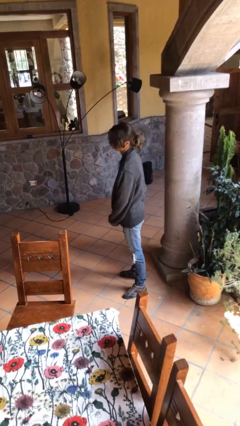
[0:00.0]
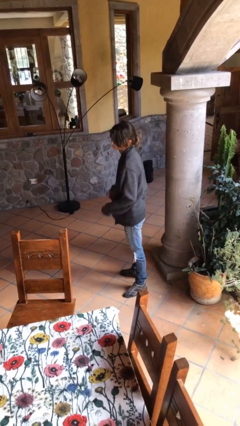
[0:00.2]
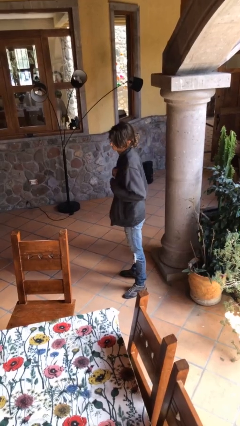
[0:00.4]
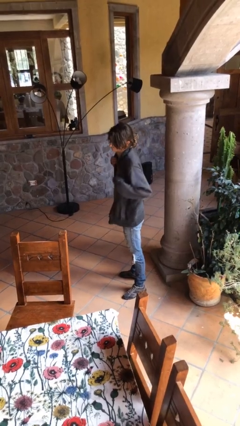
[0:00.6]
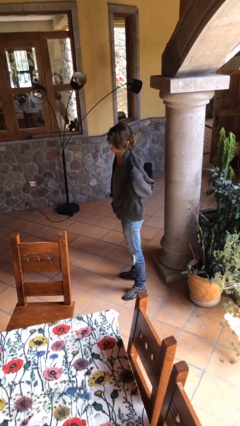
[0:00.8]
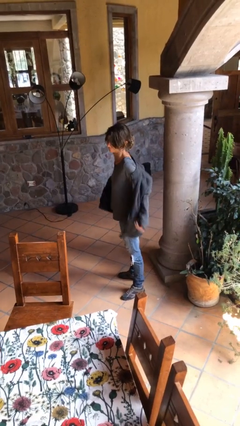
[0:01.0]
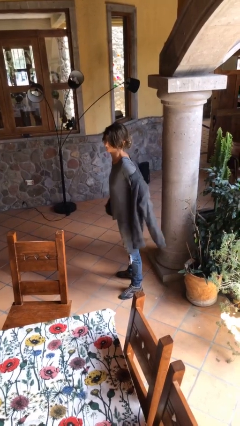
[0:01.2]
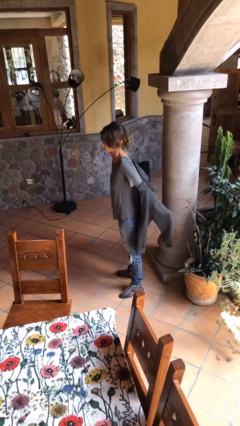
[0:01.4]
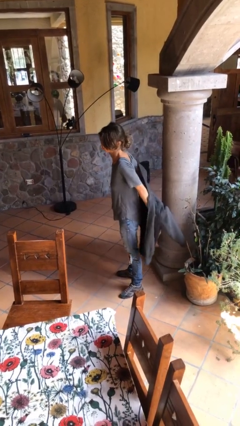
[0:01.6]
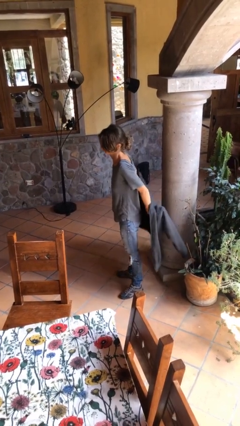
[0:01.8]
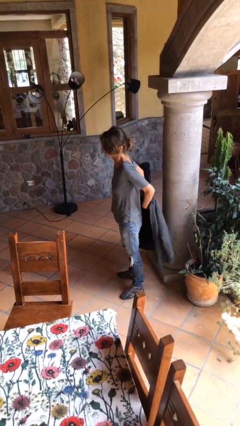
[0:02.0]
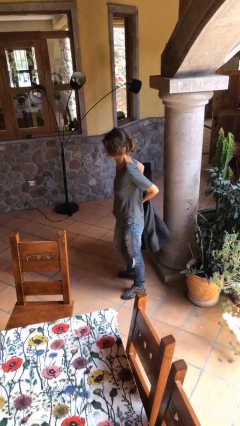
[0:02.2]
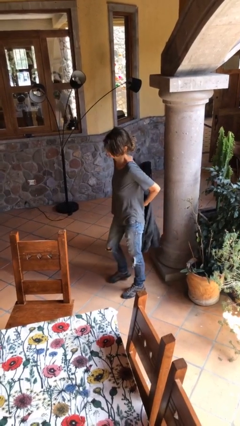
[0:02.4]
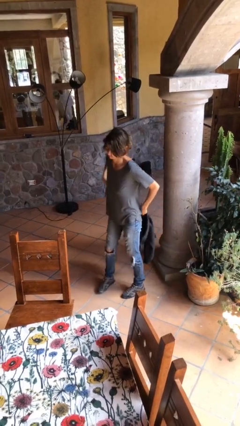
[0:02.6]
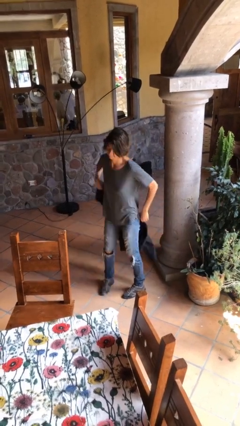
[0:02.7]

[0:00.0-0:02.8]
person takes off jacket

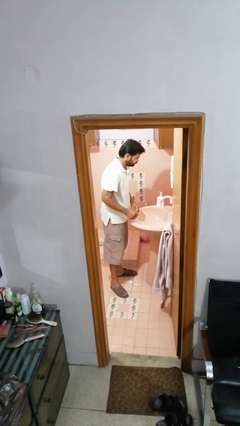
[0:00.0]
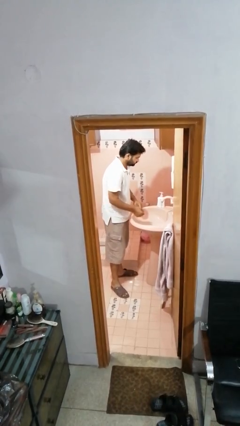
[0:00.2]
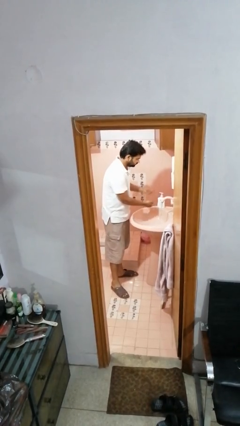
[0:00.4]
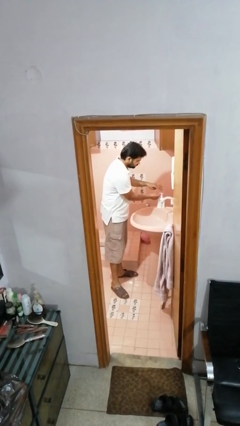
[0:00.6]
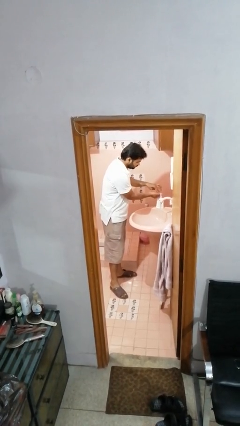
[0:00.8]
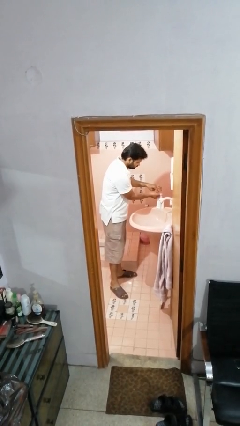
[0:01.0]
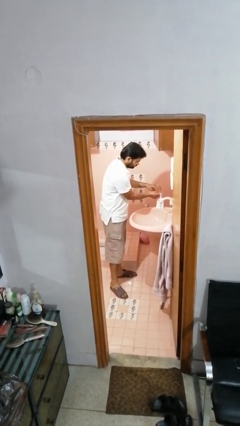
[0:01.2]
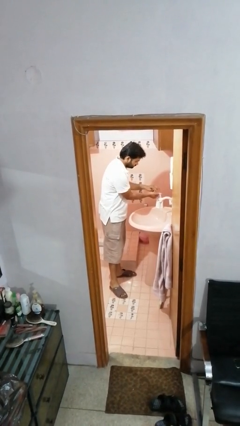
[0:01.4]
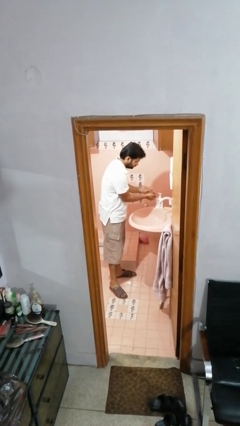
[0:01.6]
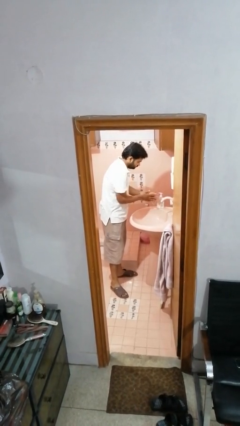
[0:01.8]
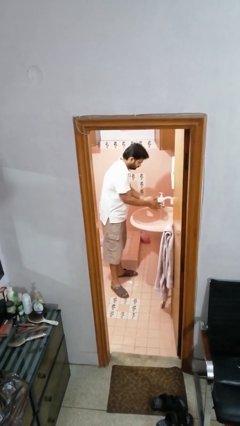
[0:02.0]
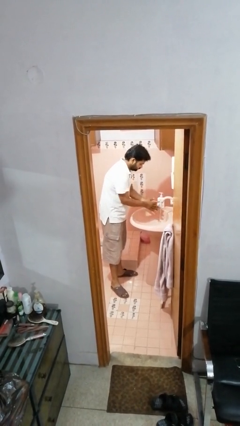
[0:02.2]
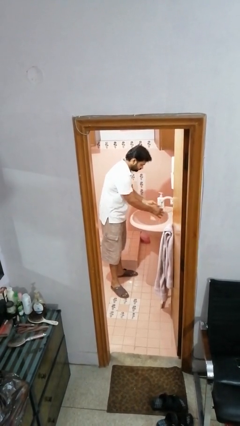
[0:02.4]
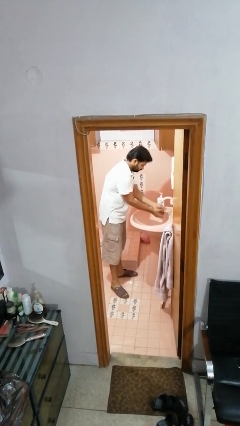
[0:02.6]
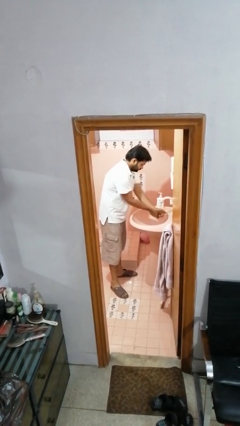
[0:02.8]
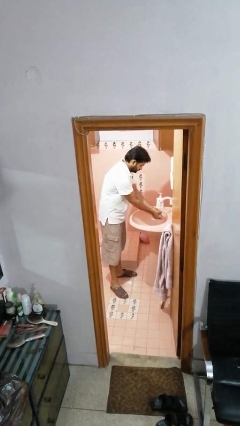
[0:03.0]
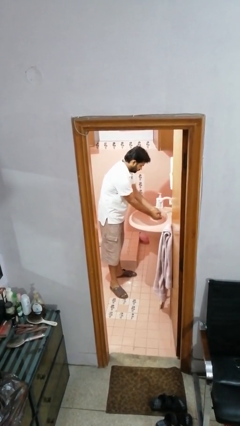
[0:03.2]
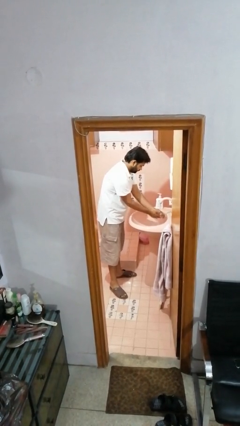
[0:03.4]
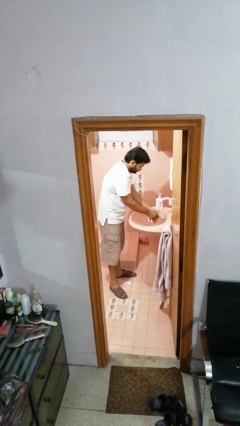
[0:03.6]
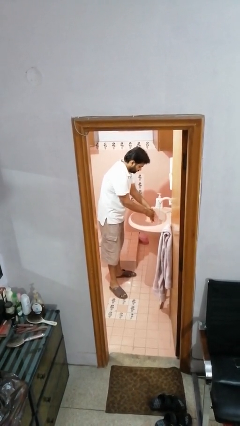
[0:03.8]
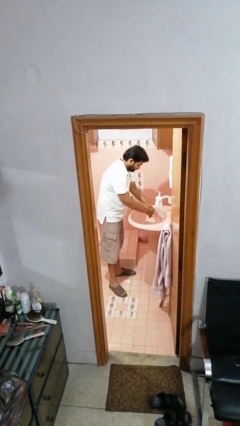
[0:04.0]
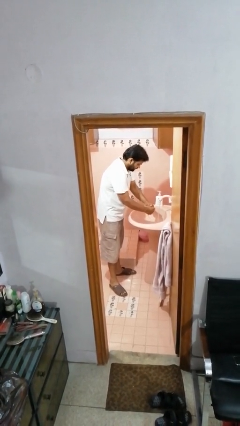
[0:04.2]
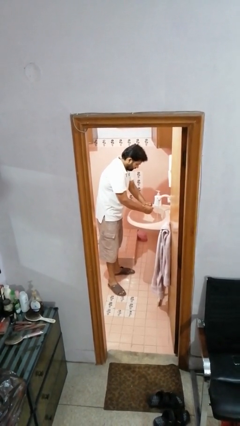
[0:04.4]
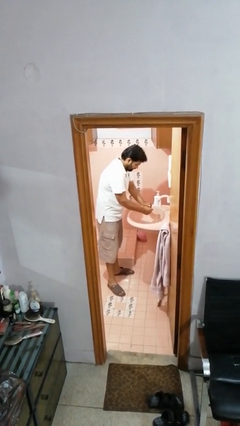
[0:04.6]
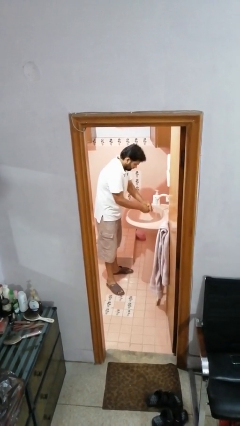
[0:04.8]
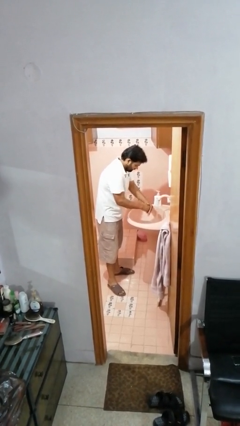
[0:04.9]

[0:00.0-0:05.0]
person washes hands

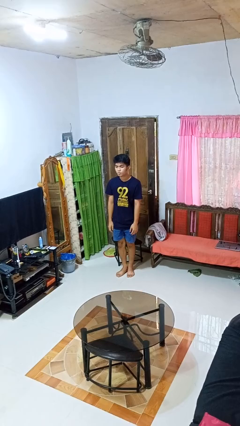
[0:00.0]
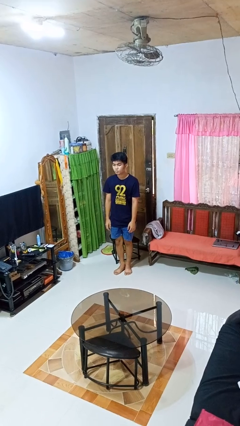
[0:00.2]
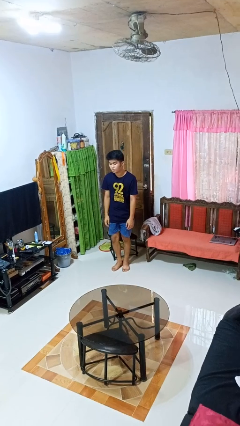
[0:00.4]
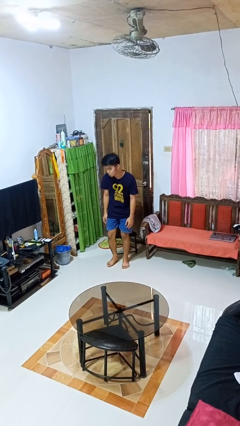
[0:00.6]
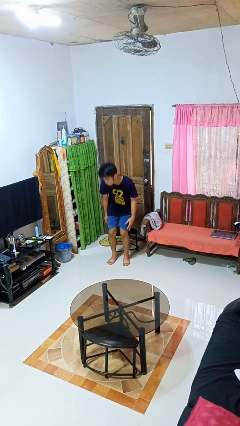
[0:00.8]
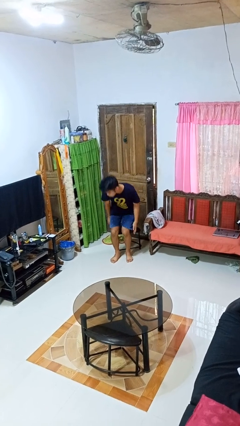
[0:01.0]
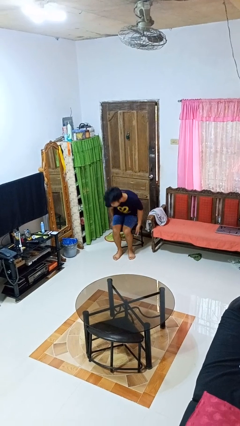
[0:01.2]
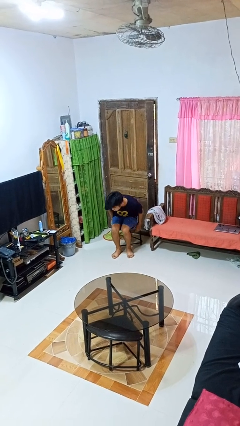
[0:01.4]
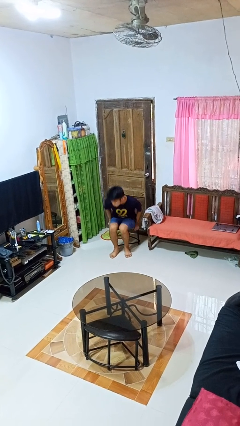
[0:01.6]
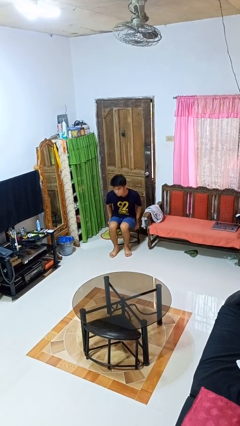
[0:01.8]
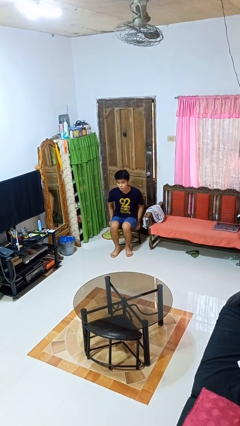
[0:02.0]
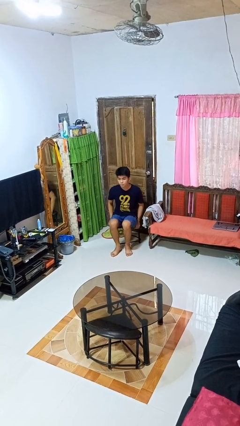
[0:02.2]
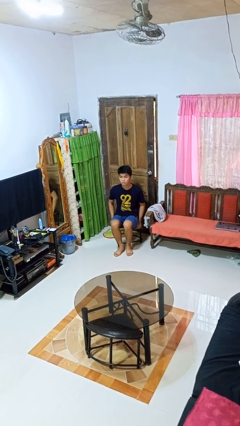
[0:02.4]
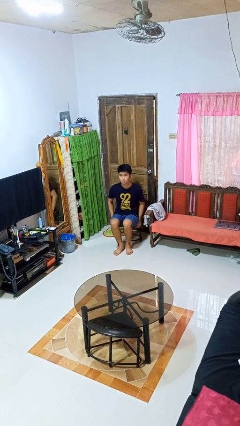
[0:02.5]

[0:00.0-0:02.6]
person sits down

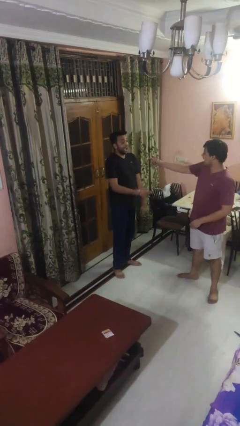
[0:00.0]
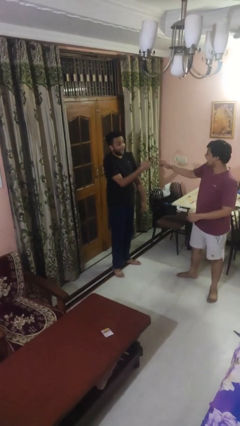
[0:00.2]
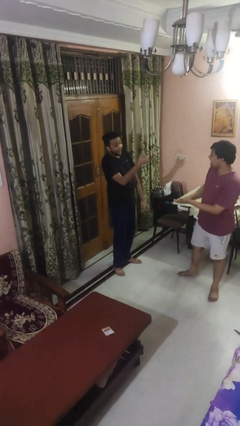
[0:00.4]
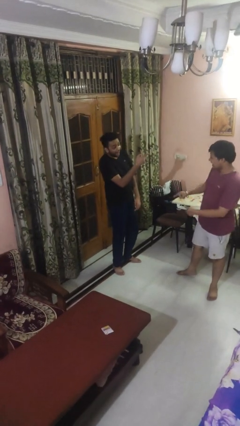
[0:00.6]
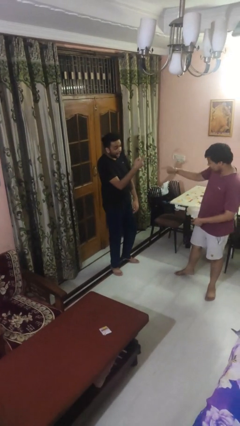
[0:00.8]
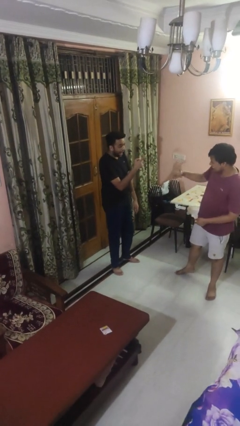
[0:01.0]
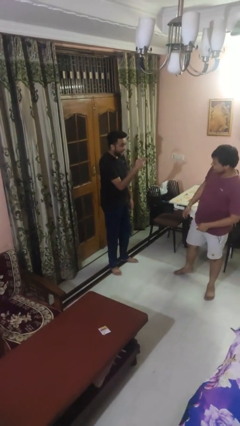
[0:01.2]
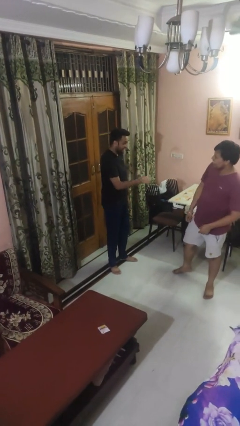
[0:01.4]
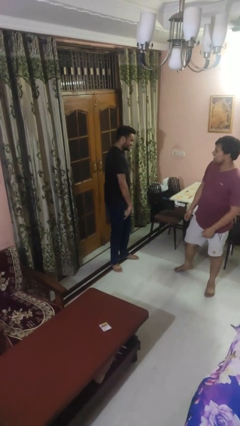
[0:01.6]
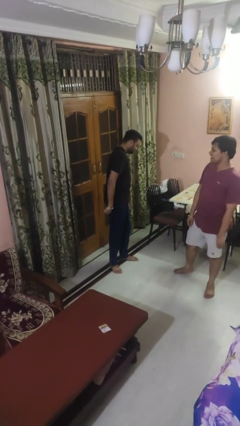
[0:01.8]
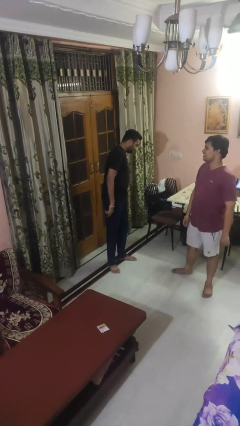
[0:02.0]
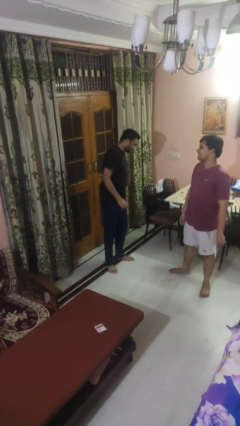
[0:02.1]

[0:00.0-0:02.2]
person laughs with person

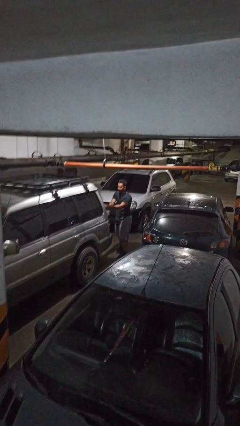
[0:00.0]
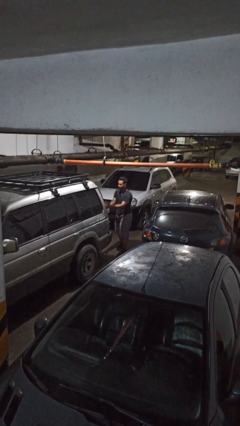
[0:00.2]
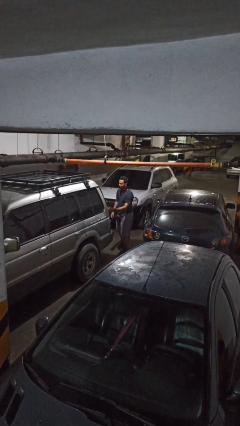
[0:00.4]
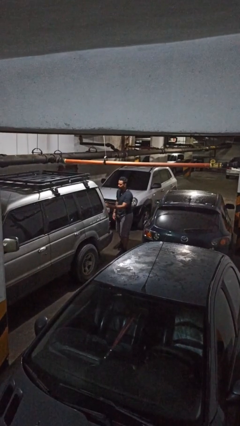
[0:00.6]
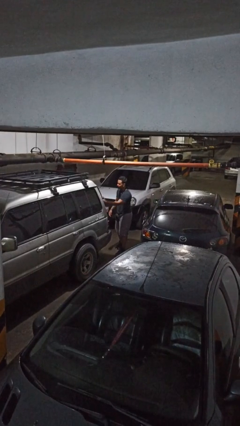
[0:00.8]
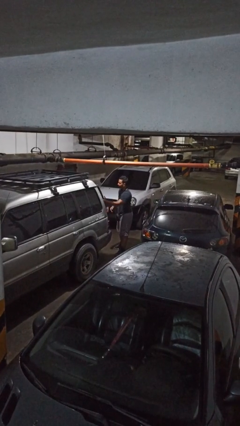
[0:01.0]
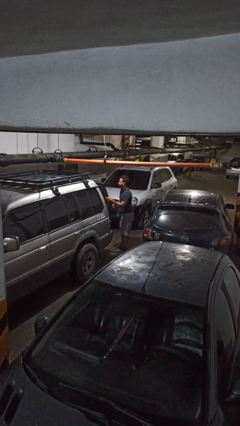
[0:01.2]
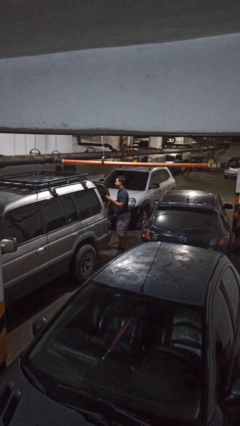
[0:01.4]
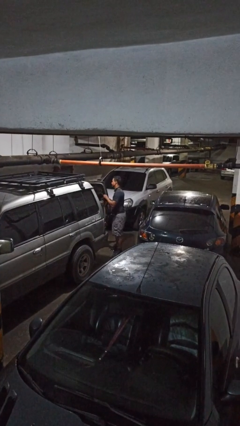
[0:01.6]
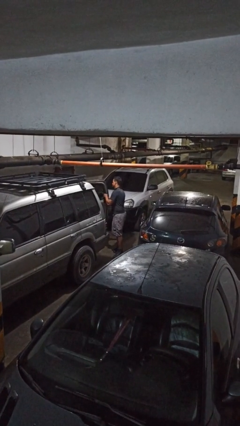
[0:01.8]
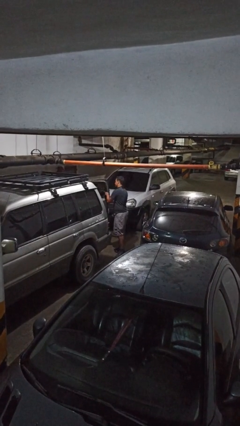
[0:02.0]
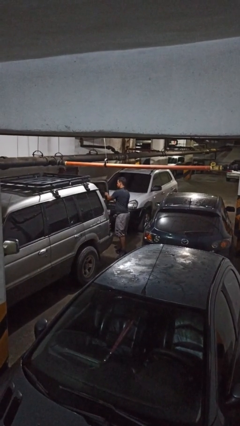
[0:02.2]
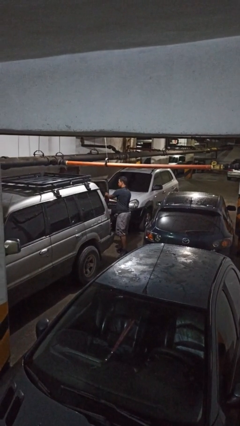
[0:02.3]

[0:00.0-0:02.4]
person opens car trunk

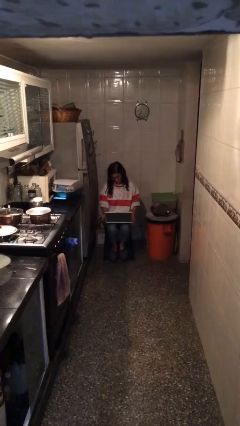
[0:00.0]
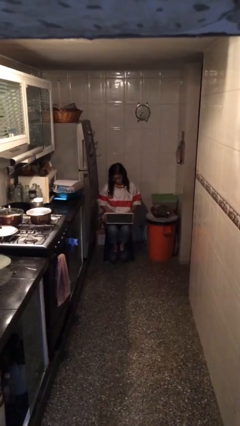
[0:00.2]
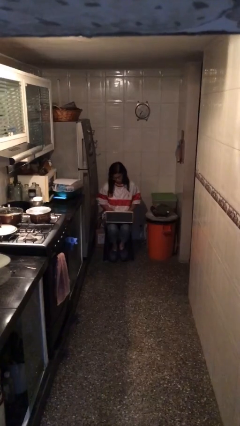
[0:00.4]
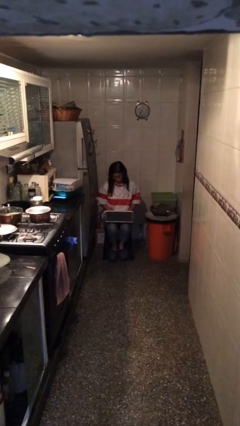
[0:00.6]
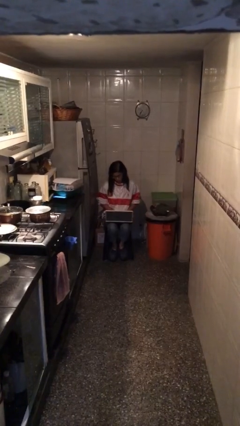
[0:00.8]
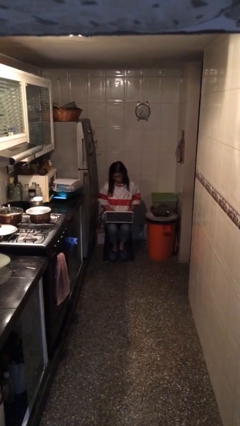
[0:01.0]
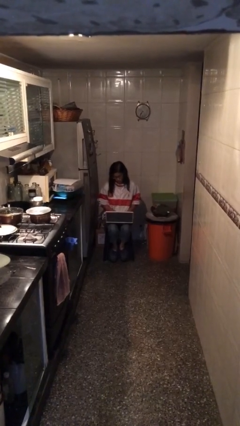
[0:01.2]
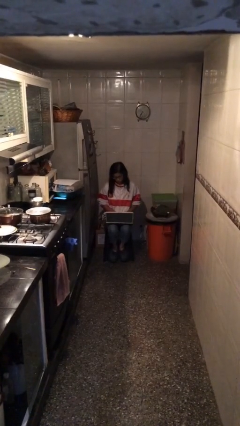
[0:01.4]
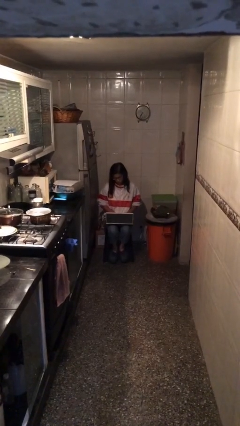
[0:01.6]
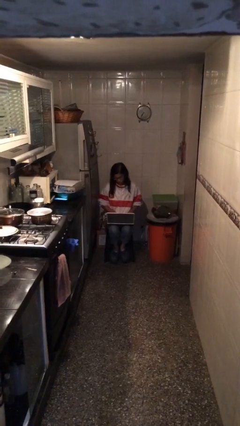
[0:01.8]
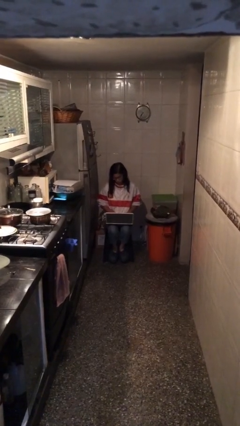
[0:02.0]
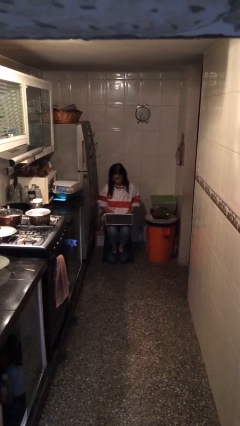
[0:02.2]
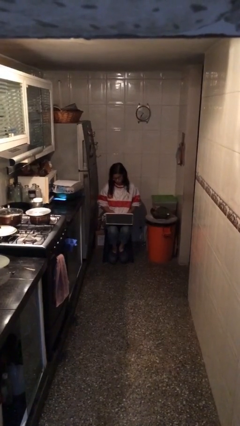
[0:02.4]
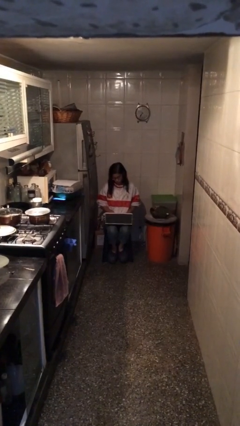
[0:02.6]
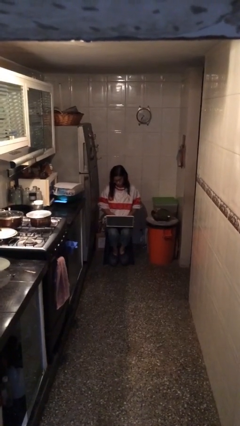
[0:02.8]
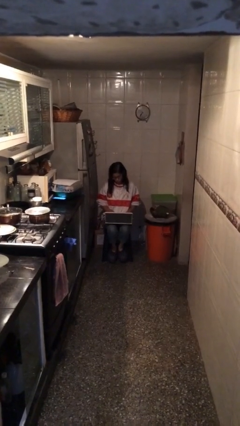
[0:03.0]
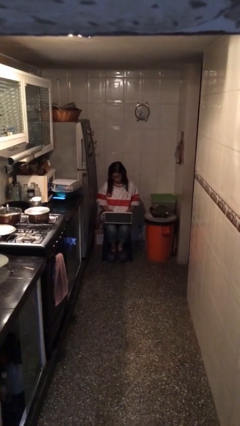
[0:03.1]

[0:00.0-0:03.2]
person interacts with laptop
